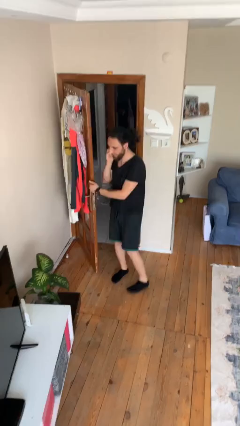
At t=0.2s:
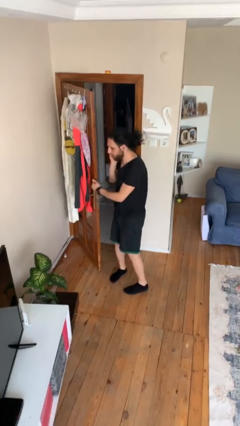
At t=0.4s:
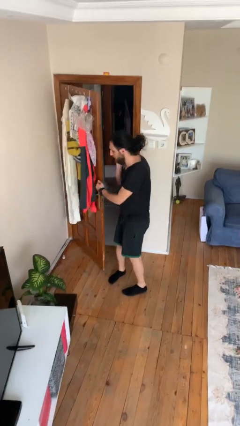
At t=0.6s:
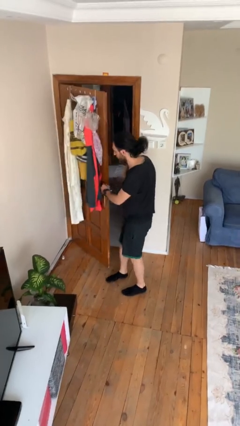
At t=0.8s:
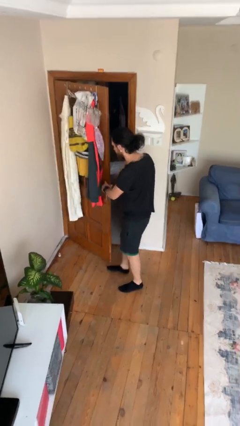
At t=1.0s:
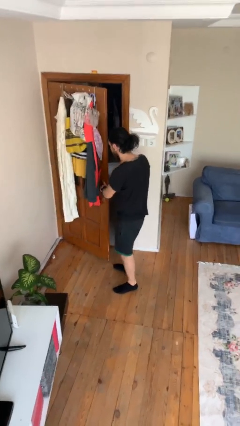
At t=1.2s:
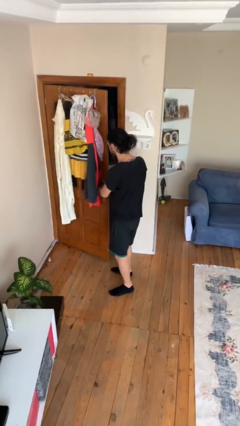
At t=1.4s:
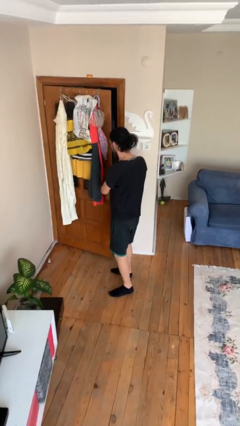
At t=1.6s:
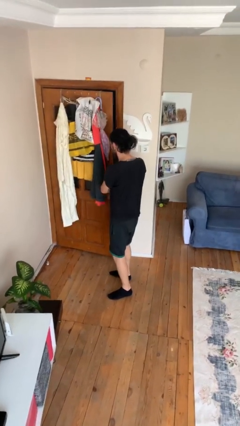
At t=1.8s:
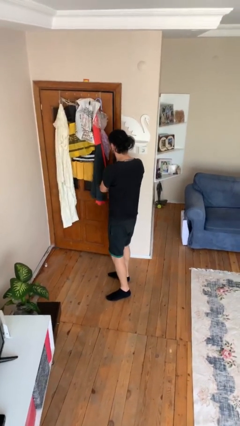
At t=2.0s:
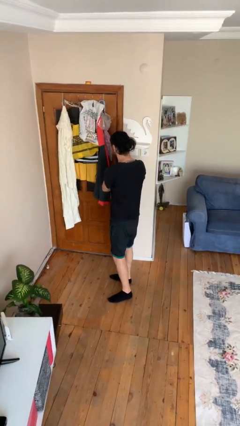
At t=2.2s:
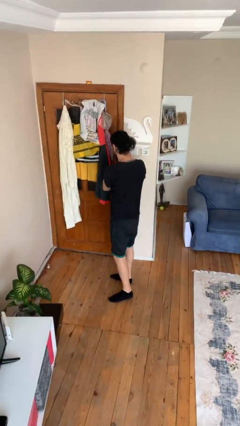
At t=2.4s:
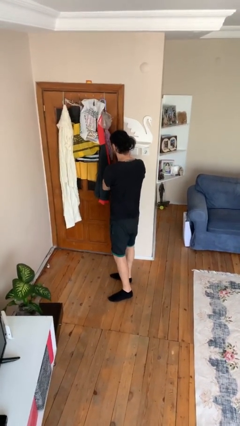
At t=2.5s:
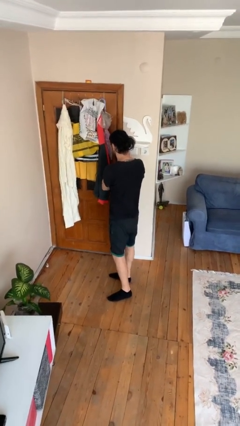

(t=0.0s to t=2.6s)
person closes facility door

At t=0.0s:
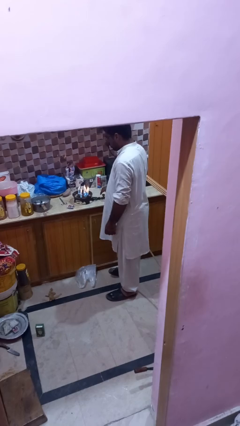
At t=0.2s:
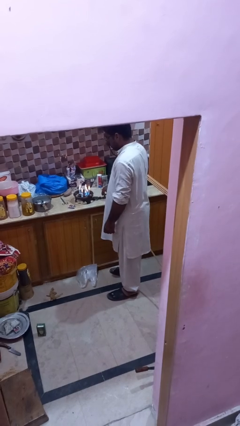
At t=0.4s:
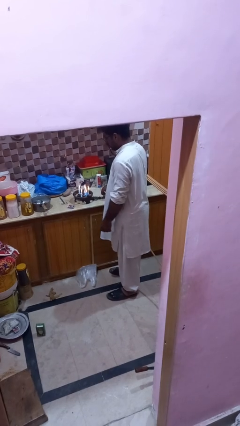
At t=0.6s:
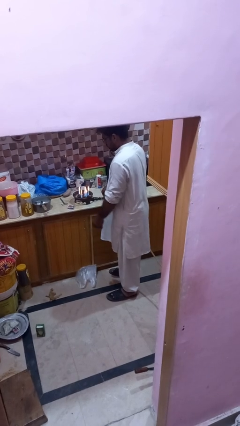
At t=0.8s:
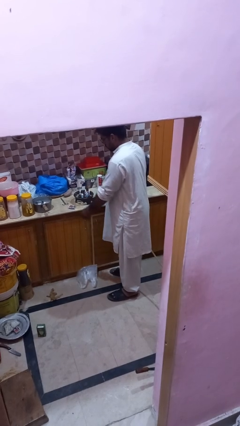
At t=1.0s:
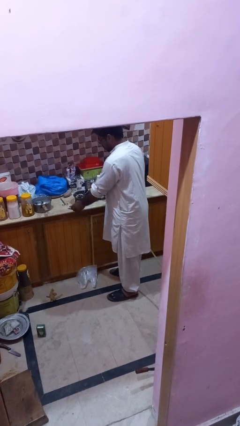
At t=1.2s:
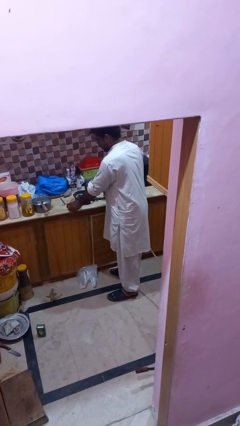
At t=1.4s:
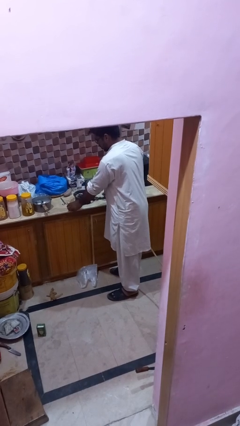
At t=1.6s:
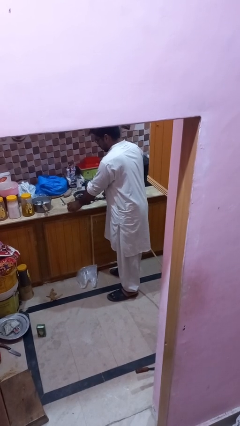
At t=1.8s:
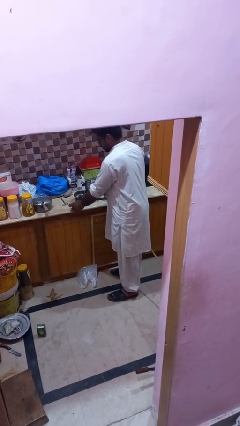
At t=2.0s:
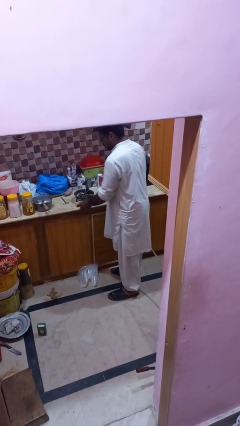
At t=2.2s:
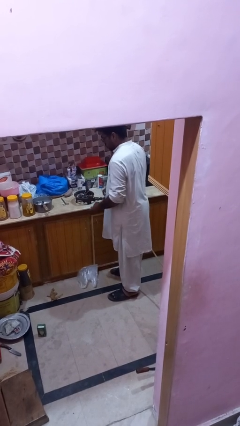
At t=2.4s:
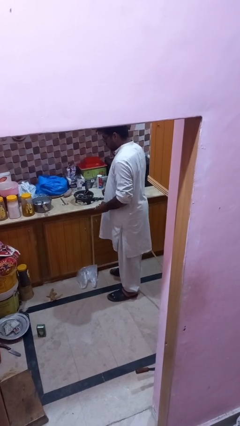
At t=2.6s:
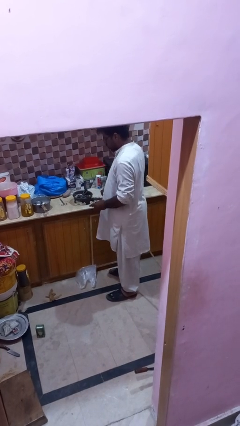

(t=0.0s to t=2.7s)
person turns off stovetop

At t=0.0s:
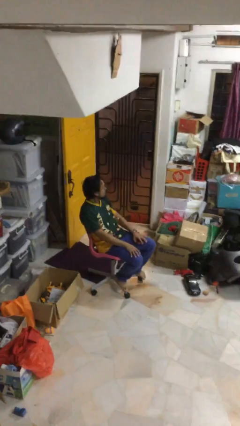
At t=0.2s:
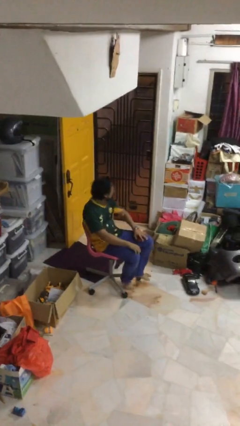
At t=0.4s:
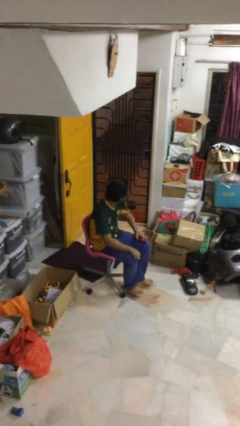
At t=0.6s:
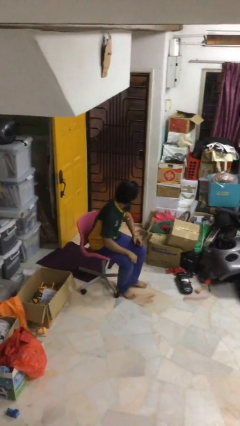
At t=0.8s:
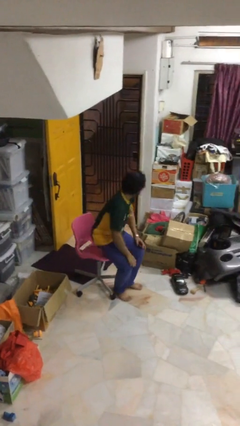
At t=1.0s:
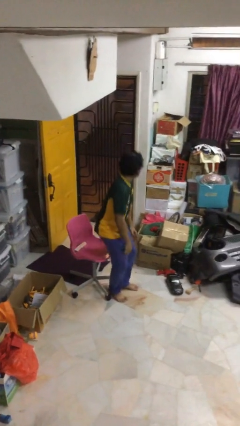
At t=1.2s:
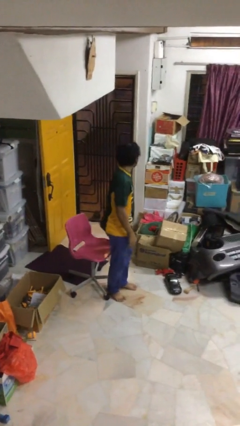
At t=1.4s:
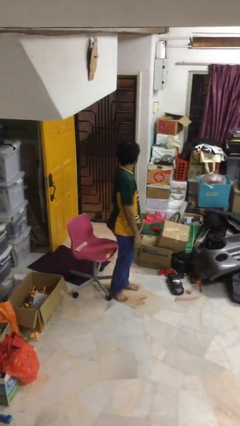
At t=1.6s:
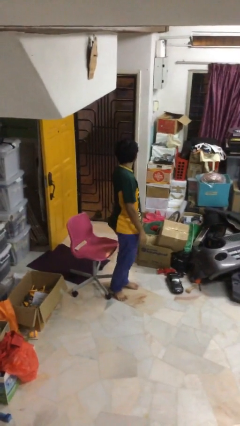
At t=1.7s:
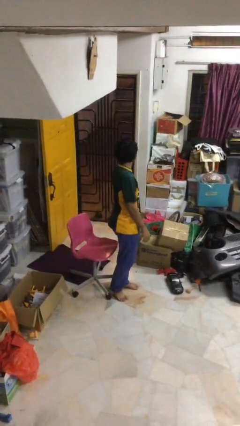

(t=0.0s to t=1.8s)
person stands up

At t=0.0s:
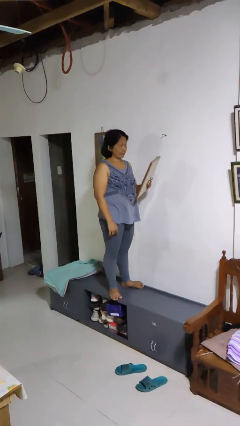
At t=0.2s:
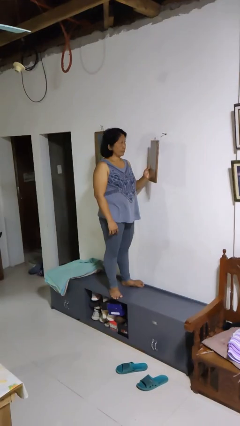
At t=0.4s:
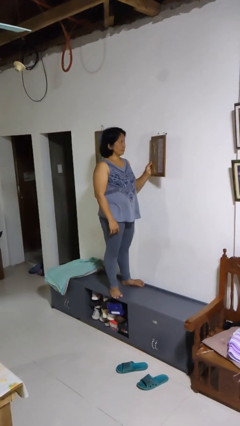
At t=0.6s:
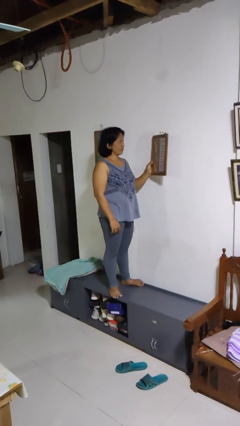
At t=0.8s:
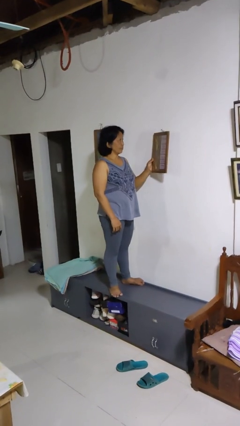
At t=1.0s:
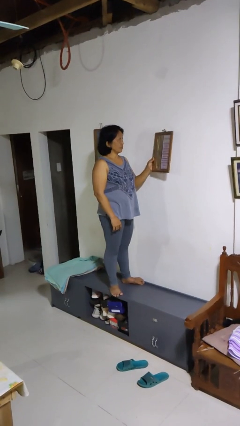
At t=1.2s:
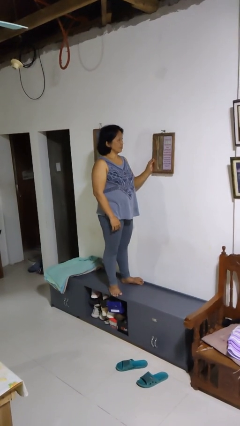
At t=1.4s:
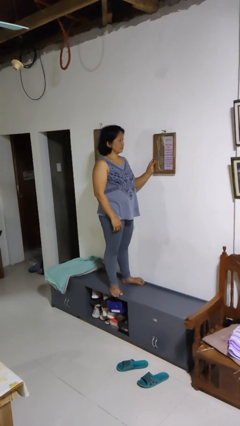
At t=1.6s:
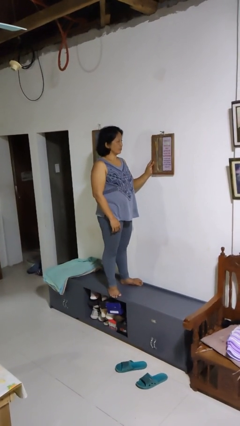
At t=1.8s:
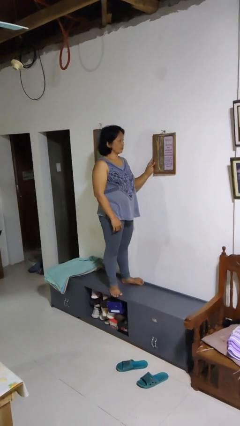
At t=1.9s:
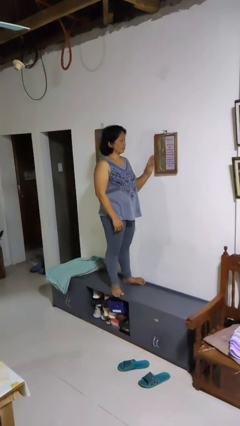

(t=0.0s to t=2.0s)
person puts up picture frame

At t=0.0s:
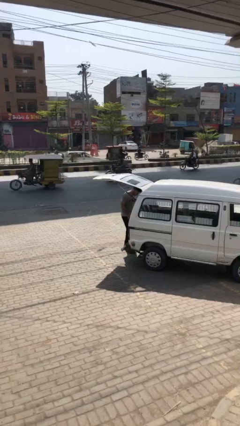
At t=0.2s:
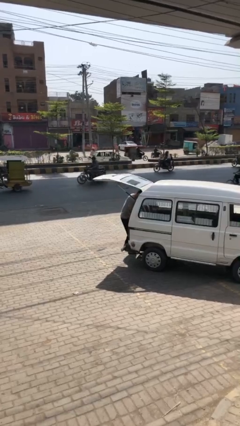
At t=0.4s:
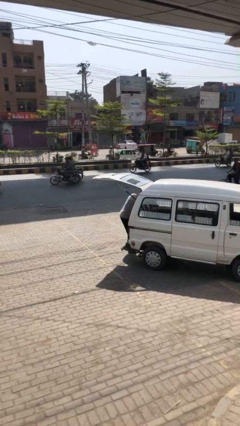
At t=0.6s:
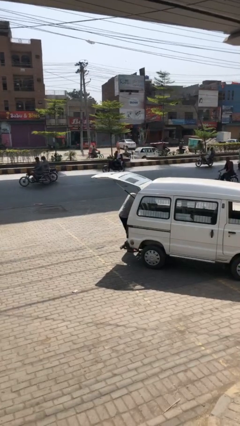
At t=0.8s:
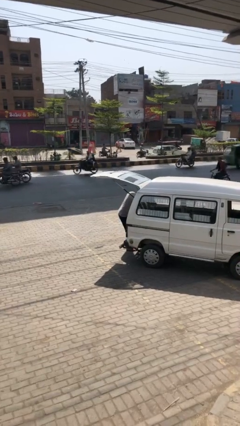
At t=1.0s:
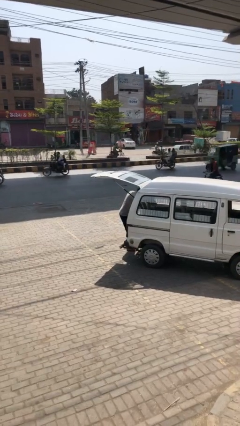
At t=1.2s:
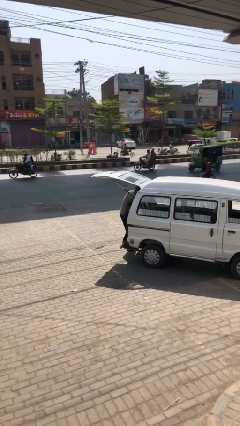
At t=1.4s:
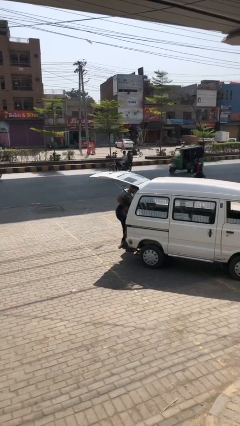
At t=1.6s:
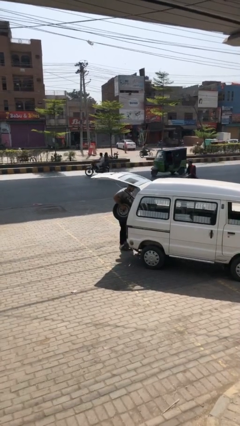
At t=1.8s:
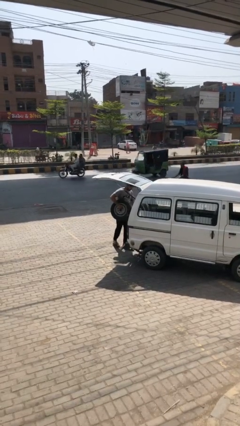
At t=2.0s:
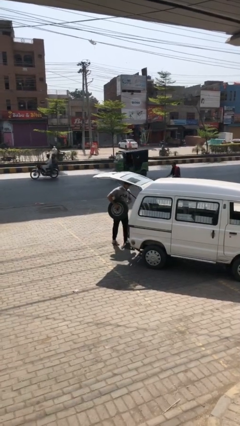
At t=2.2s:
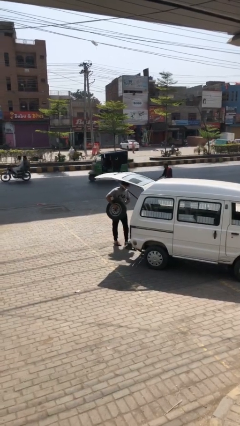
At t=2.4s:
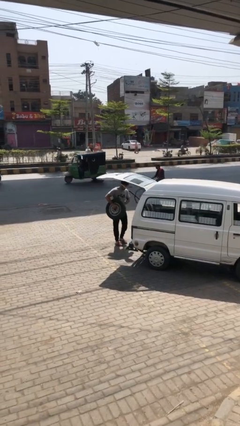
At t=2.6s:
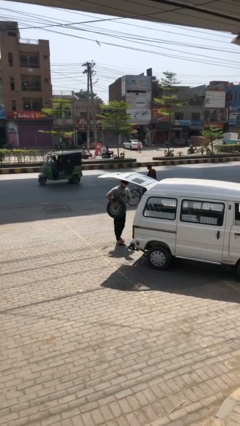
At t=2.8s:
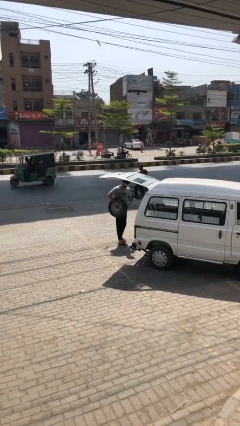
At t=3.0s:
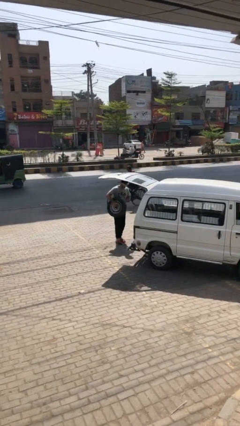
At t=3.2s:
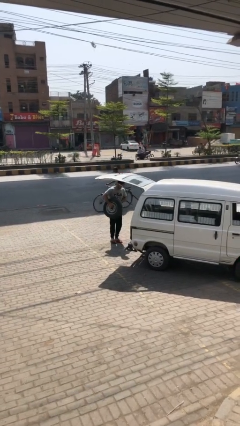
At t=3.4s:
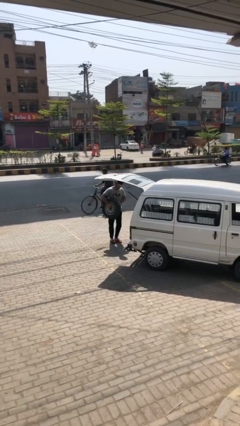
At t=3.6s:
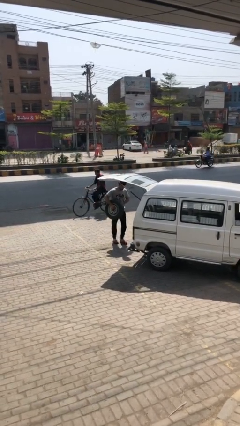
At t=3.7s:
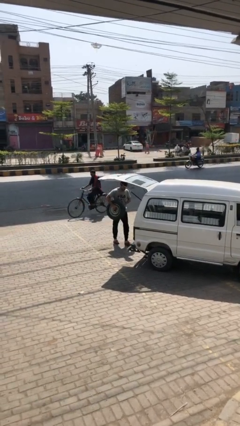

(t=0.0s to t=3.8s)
person unloads car

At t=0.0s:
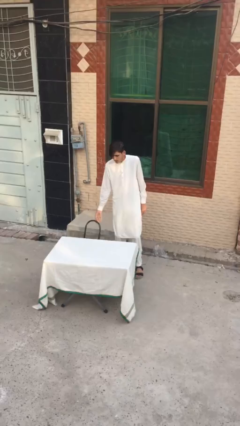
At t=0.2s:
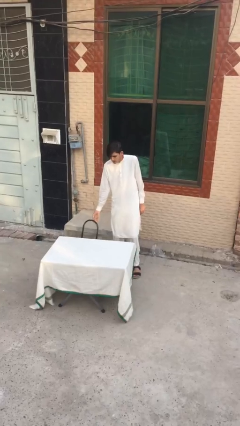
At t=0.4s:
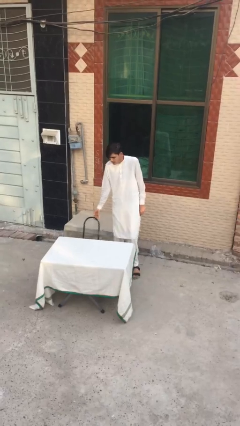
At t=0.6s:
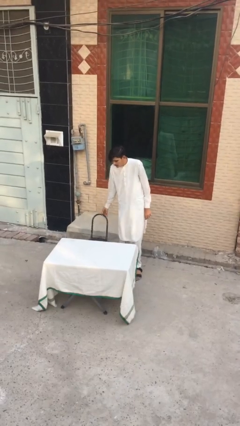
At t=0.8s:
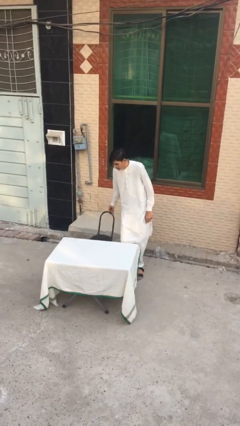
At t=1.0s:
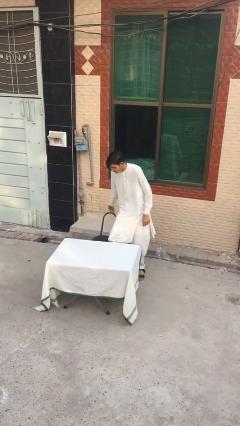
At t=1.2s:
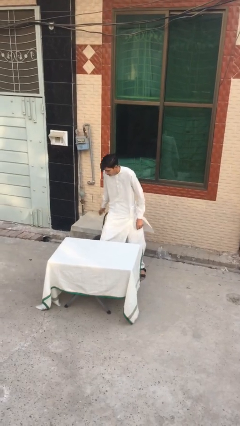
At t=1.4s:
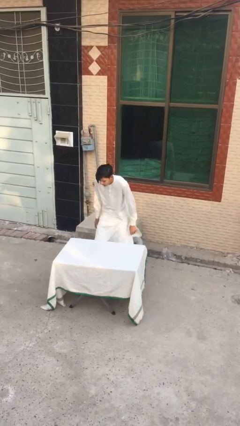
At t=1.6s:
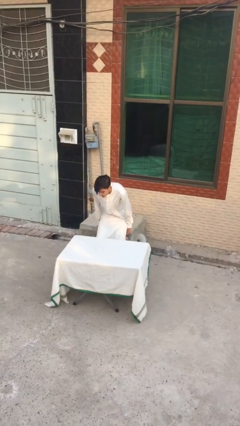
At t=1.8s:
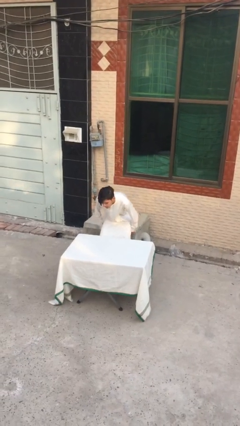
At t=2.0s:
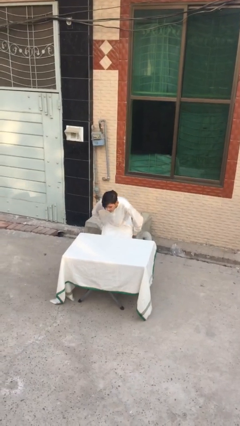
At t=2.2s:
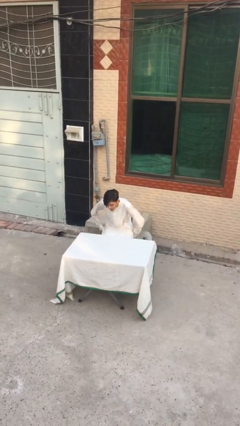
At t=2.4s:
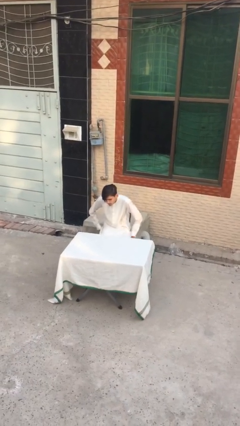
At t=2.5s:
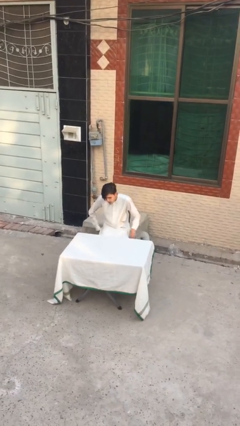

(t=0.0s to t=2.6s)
person sits down

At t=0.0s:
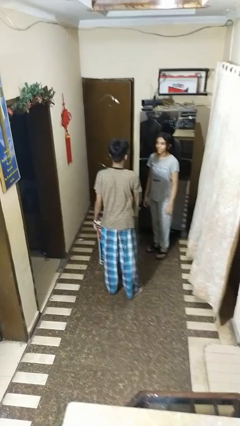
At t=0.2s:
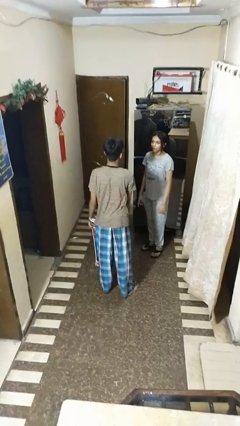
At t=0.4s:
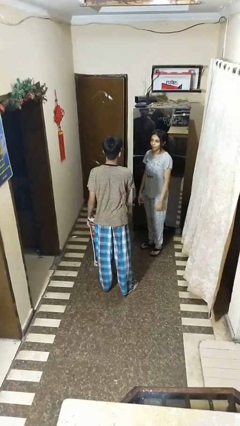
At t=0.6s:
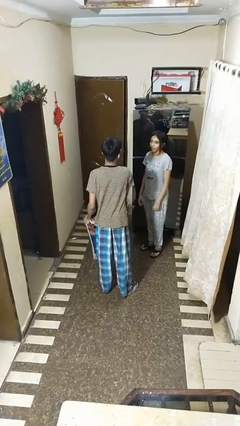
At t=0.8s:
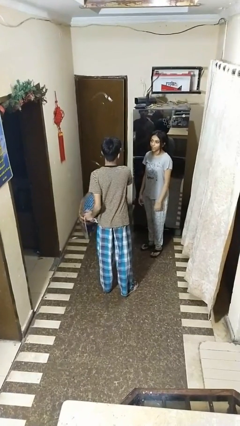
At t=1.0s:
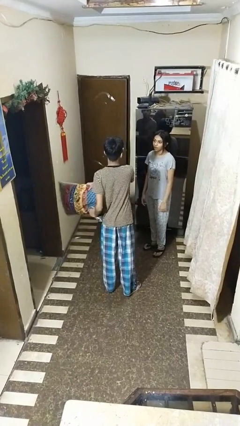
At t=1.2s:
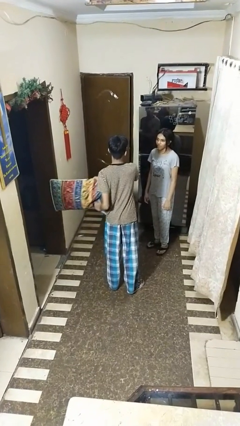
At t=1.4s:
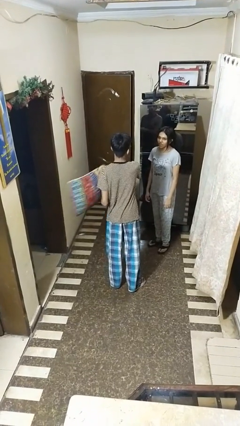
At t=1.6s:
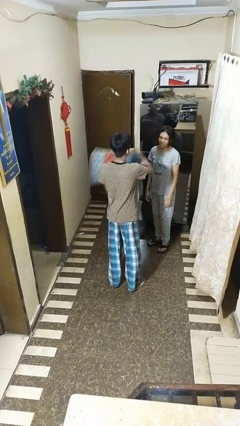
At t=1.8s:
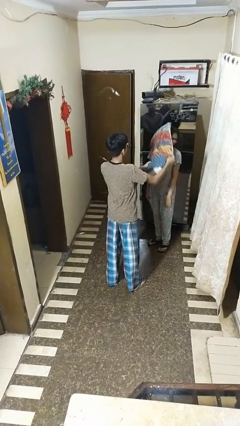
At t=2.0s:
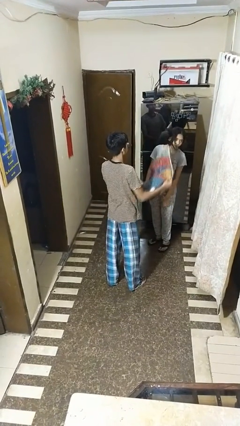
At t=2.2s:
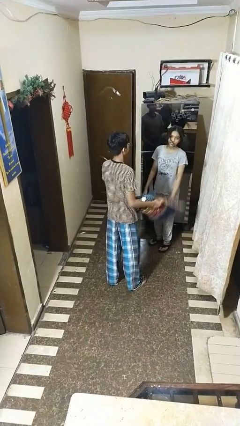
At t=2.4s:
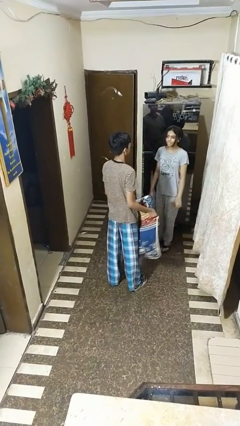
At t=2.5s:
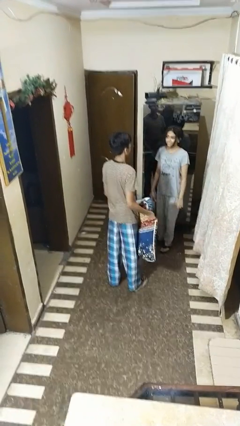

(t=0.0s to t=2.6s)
person hits person with pillow
